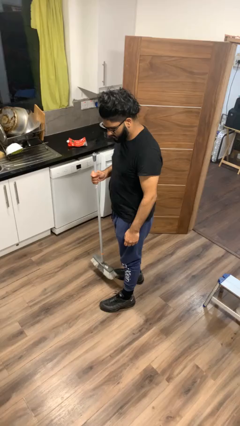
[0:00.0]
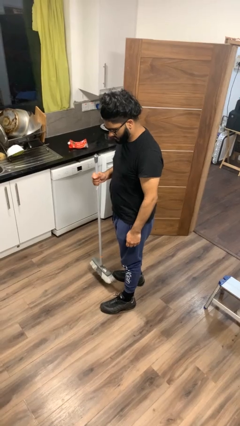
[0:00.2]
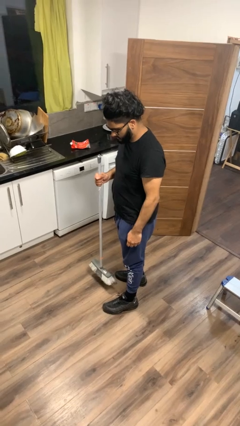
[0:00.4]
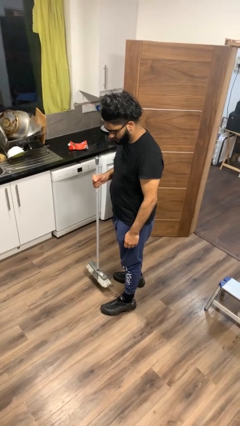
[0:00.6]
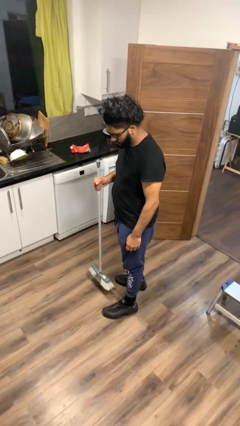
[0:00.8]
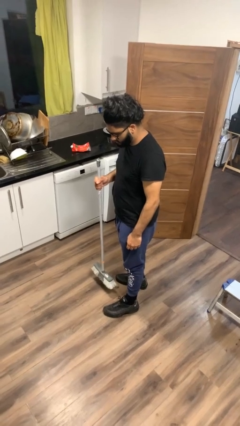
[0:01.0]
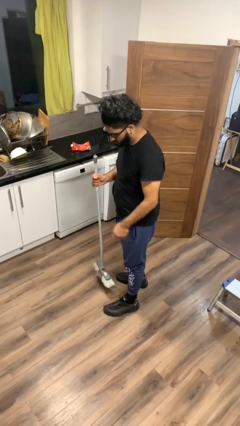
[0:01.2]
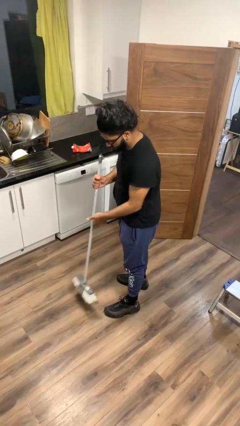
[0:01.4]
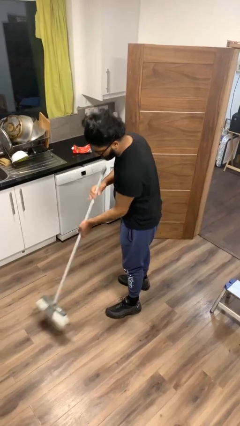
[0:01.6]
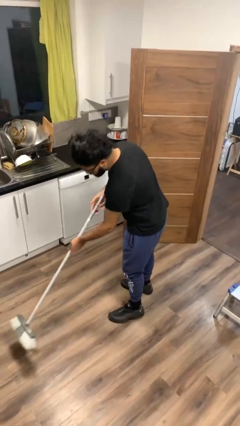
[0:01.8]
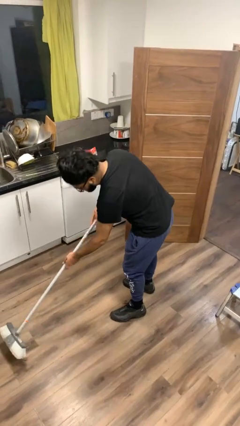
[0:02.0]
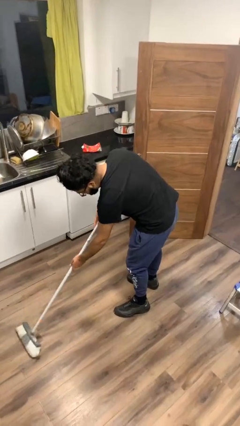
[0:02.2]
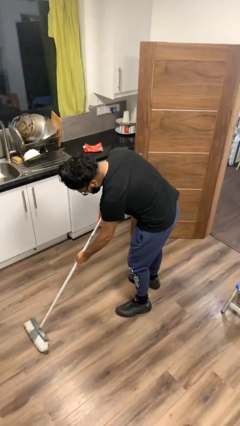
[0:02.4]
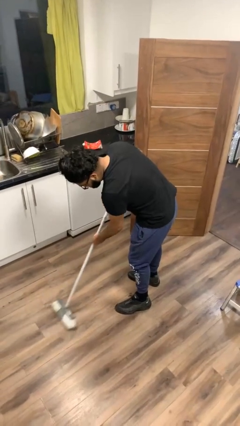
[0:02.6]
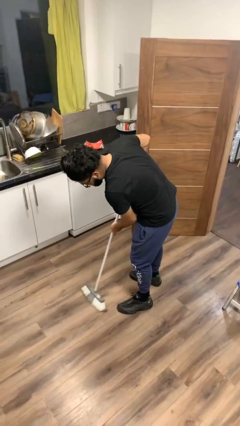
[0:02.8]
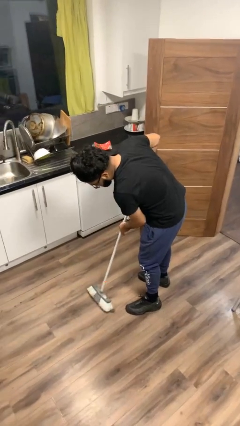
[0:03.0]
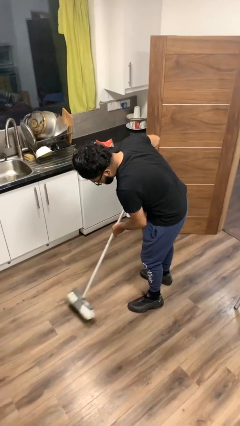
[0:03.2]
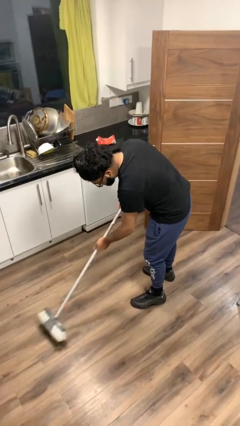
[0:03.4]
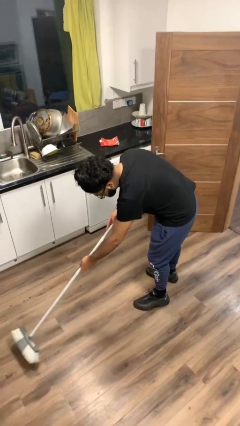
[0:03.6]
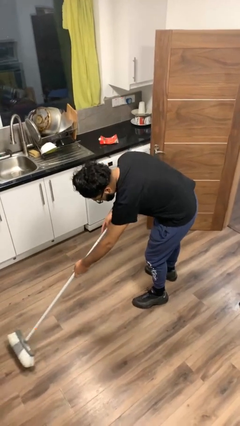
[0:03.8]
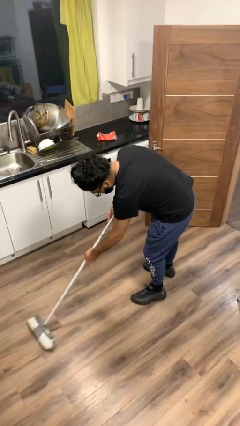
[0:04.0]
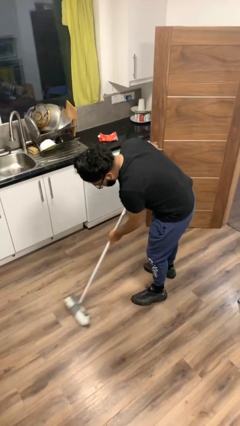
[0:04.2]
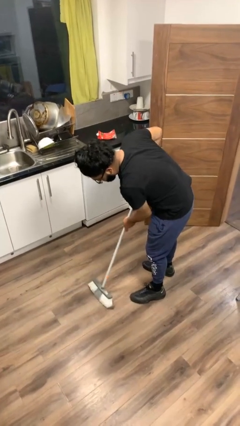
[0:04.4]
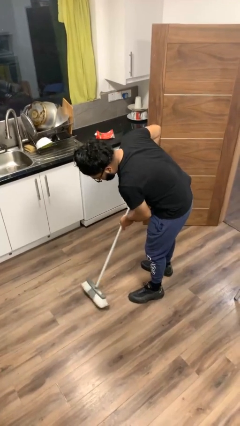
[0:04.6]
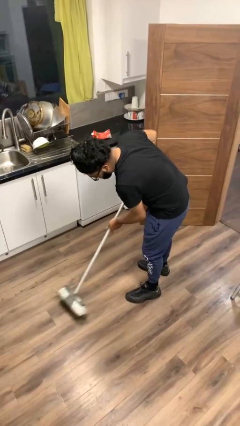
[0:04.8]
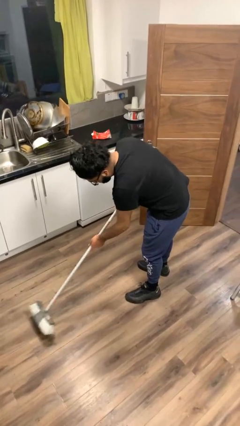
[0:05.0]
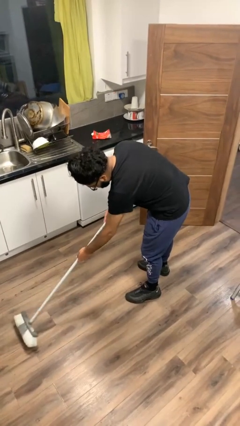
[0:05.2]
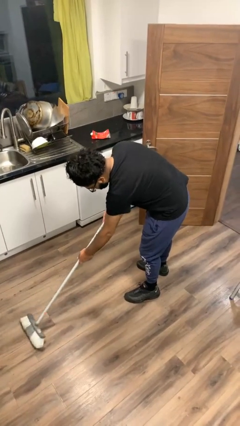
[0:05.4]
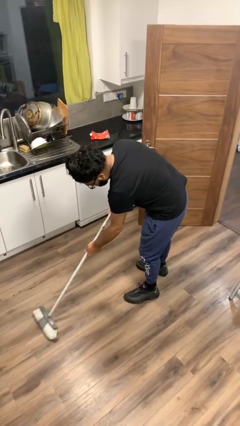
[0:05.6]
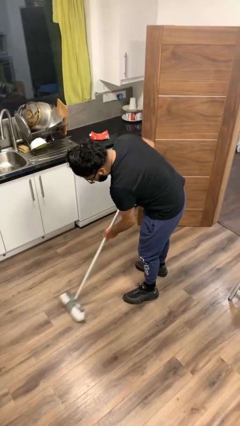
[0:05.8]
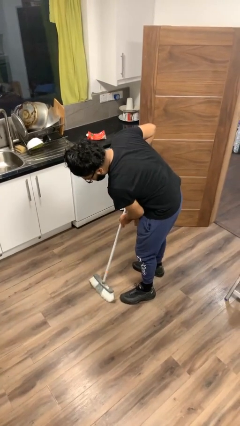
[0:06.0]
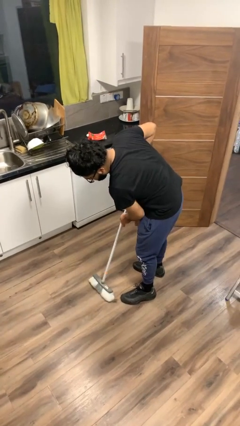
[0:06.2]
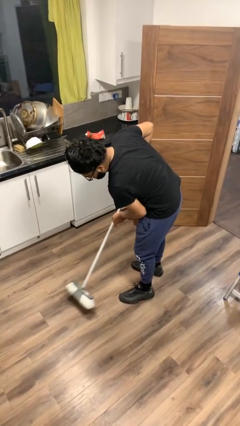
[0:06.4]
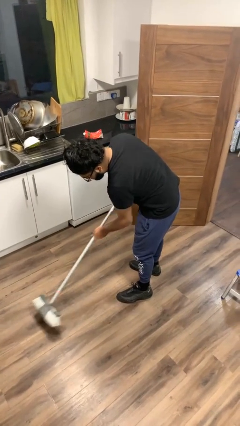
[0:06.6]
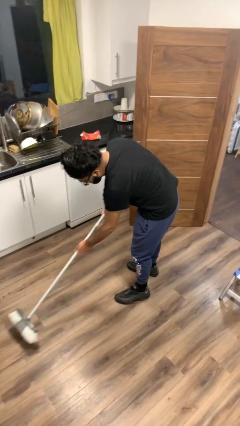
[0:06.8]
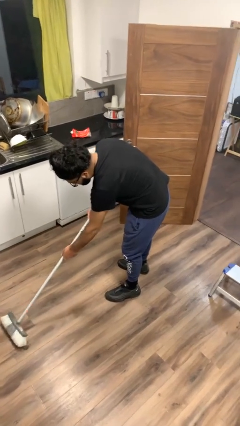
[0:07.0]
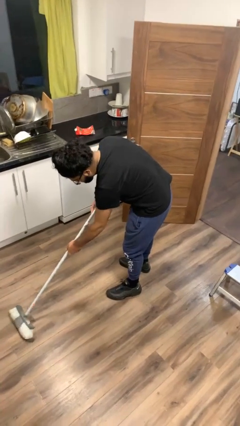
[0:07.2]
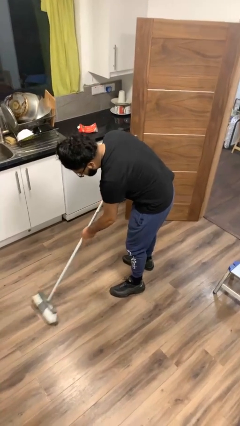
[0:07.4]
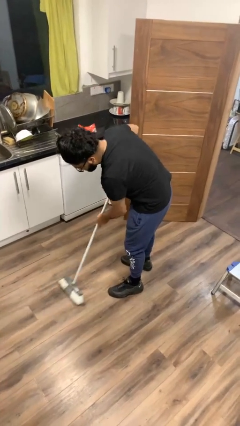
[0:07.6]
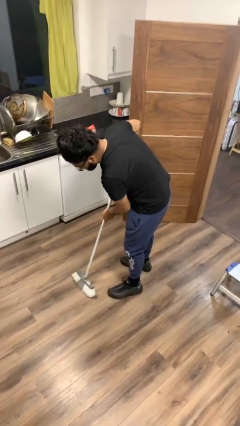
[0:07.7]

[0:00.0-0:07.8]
person sweeps floor

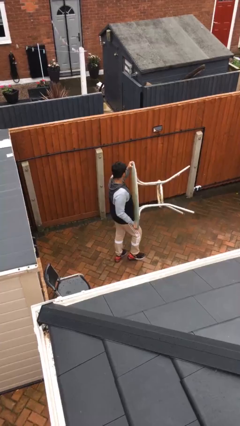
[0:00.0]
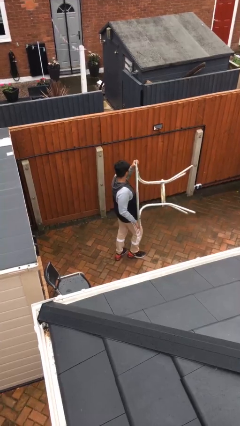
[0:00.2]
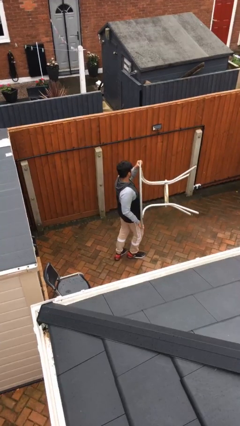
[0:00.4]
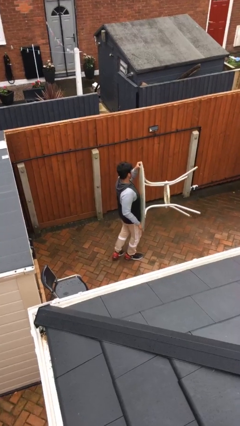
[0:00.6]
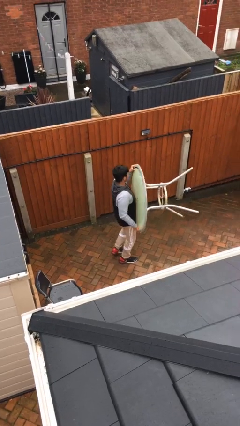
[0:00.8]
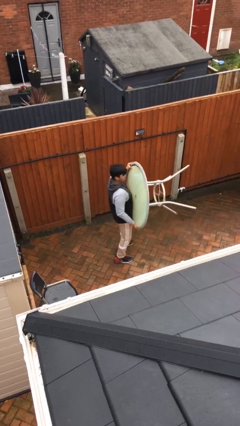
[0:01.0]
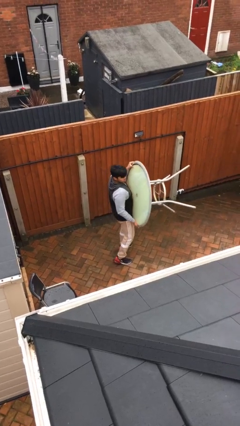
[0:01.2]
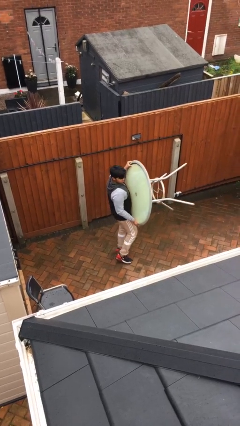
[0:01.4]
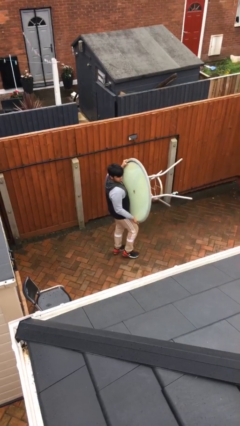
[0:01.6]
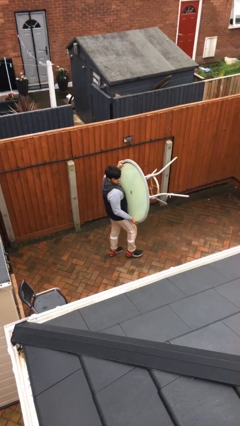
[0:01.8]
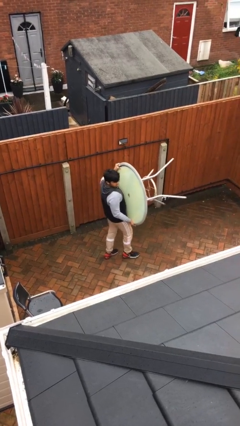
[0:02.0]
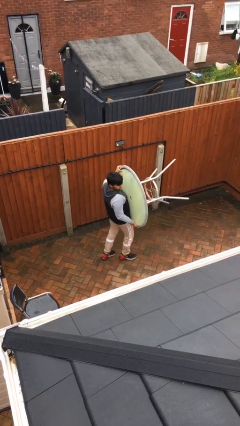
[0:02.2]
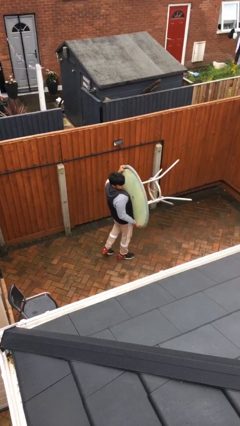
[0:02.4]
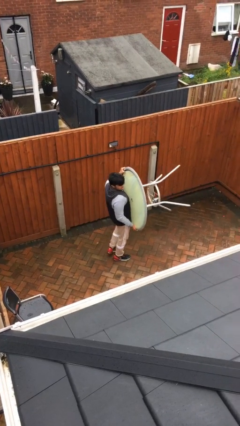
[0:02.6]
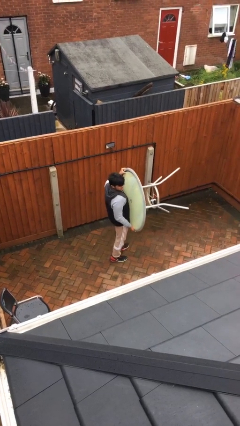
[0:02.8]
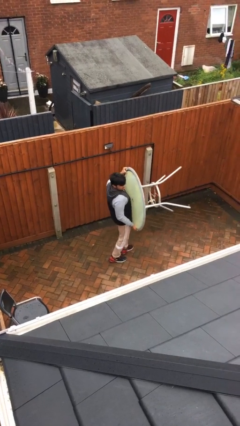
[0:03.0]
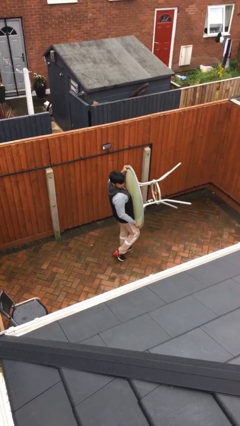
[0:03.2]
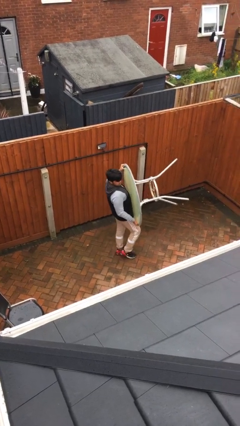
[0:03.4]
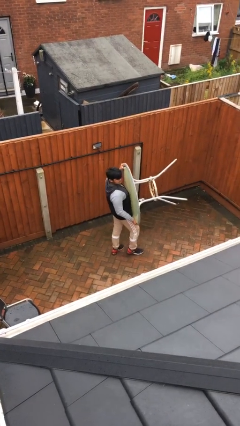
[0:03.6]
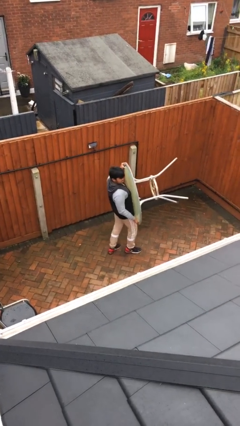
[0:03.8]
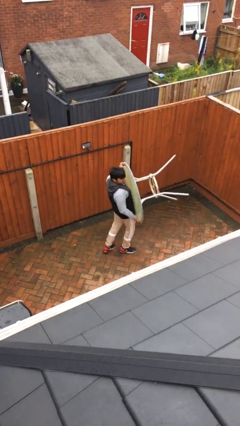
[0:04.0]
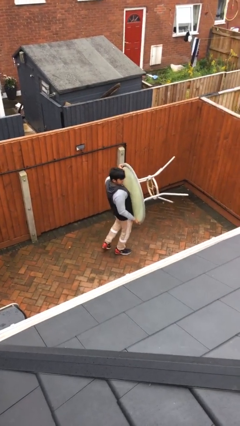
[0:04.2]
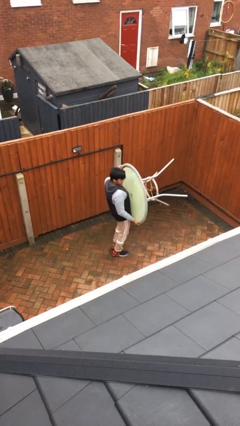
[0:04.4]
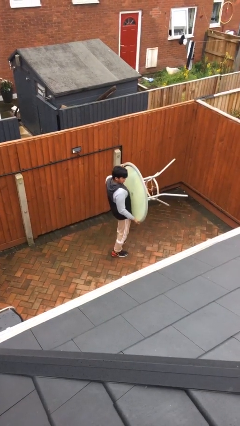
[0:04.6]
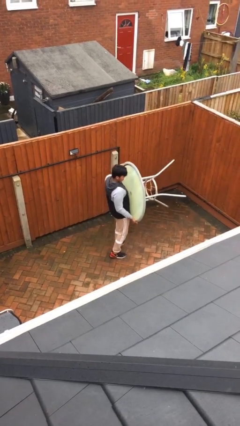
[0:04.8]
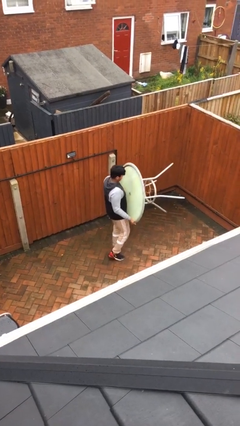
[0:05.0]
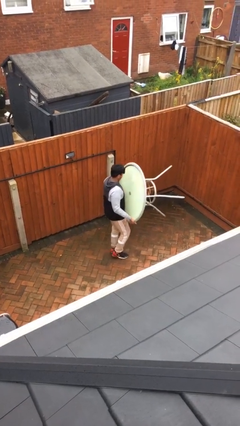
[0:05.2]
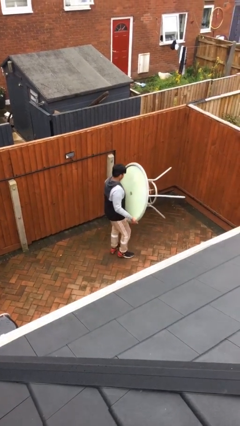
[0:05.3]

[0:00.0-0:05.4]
person carries heavy object

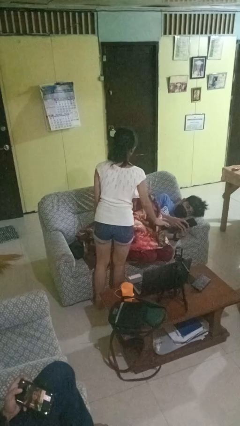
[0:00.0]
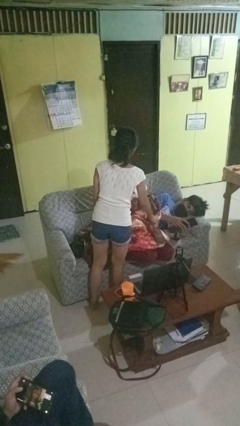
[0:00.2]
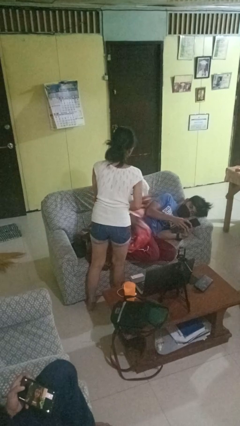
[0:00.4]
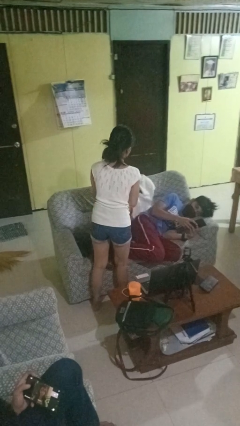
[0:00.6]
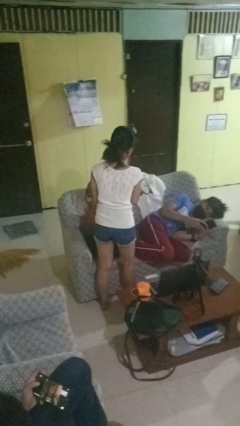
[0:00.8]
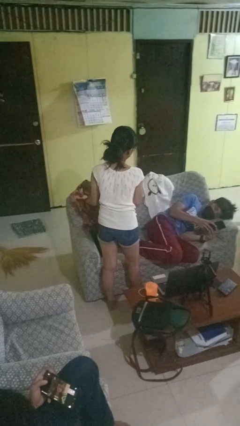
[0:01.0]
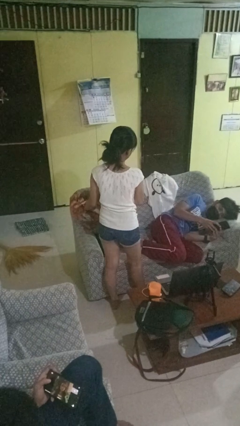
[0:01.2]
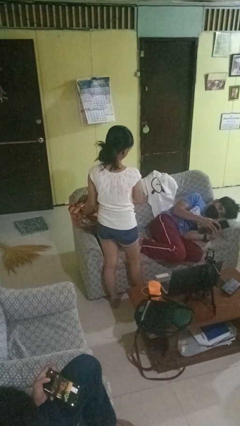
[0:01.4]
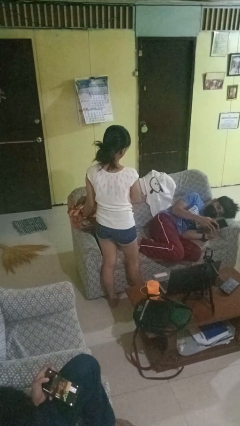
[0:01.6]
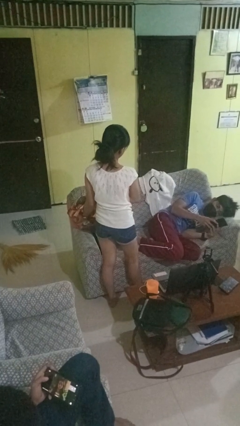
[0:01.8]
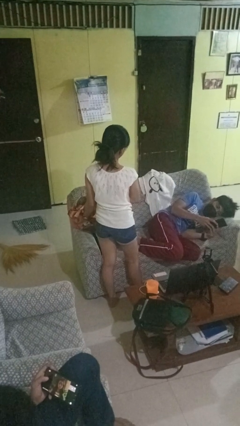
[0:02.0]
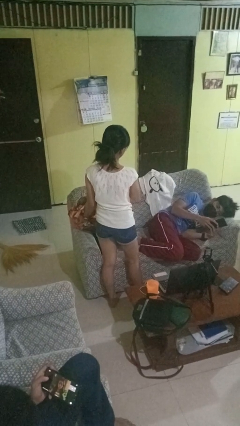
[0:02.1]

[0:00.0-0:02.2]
person uncovers friend with blanket

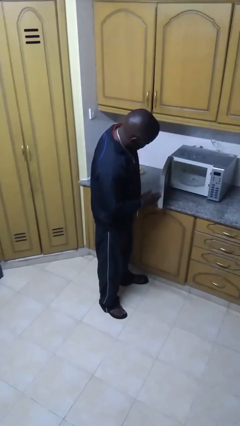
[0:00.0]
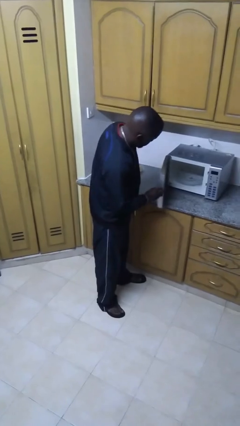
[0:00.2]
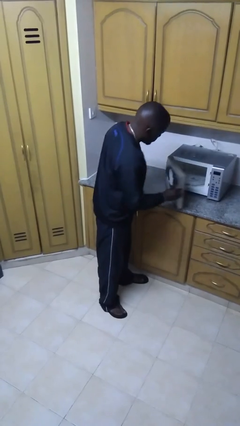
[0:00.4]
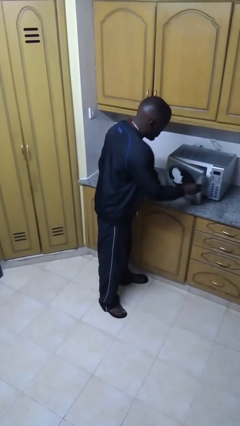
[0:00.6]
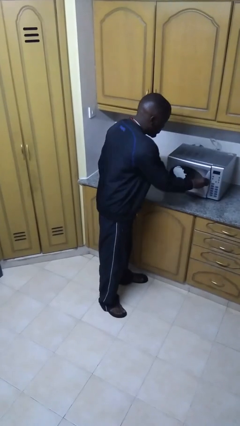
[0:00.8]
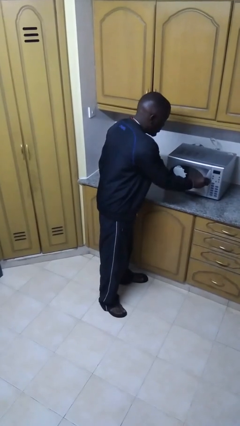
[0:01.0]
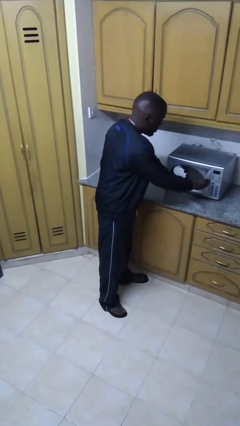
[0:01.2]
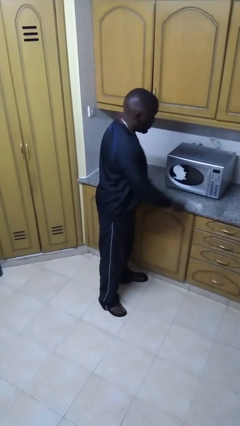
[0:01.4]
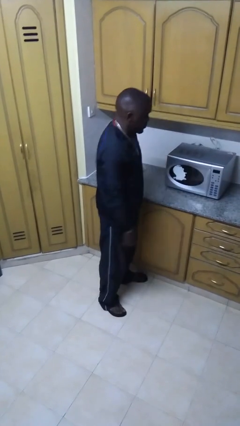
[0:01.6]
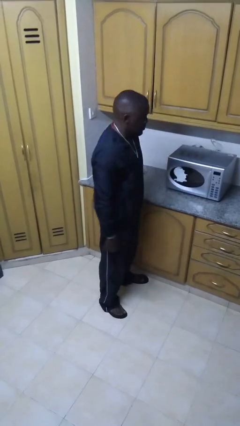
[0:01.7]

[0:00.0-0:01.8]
person closes microwave

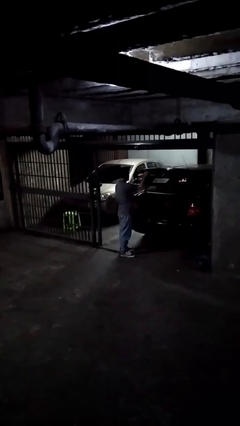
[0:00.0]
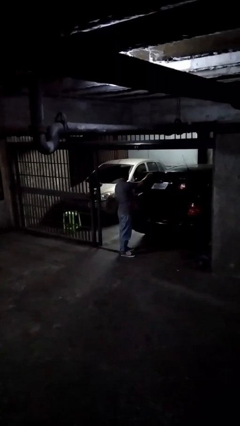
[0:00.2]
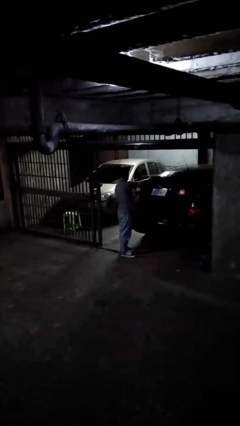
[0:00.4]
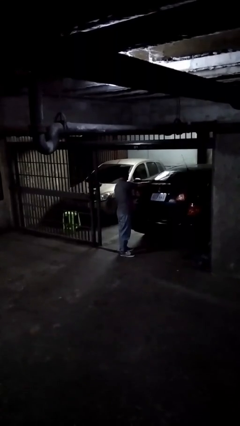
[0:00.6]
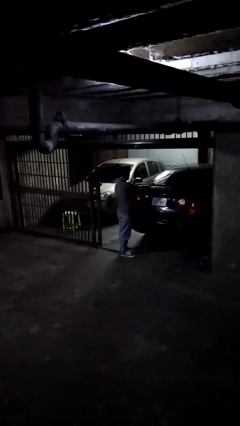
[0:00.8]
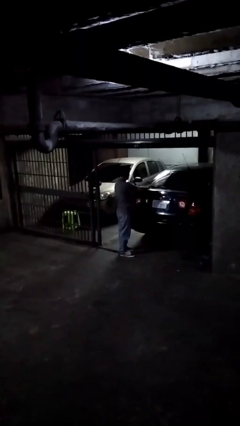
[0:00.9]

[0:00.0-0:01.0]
person closes car trunk
